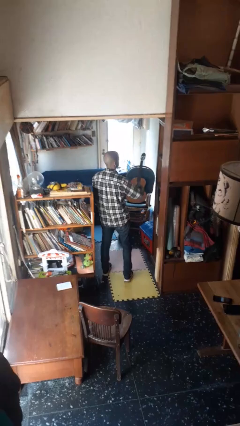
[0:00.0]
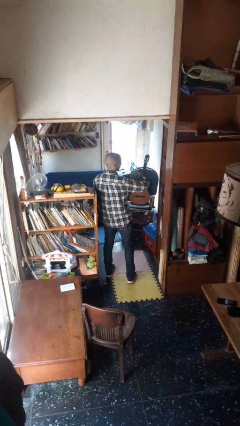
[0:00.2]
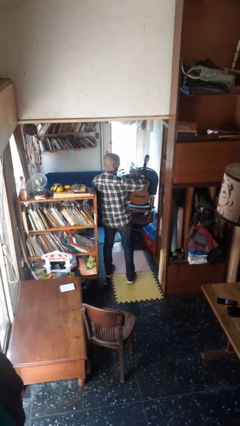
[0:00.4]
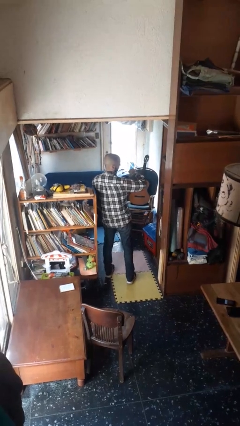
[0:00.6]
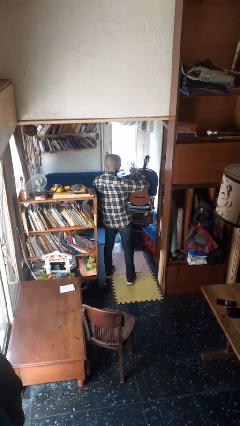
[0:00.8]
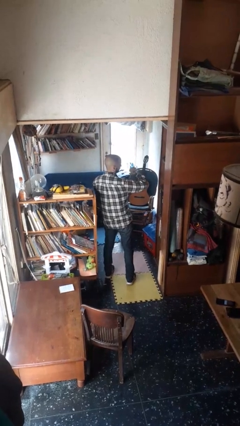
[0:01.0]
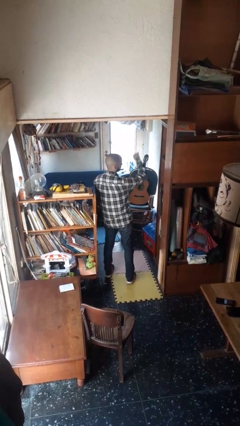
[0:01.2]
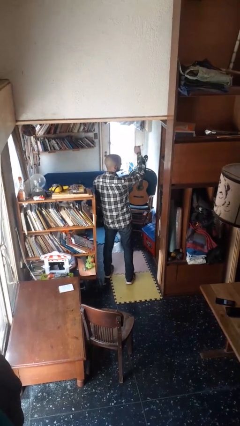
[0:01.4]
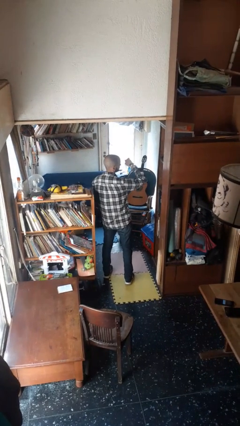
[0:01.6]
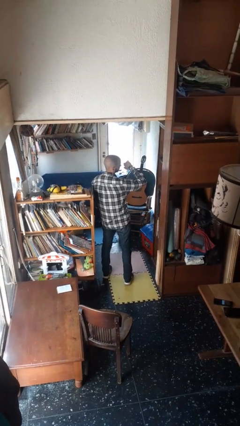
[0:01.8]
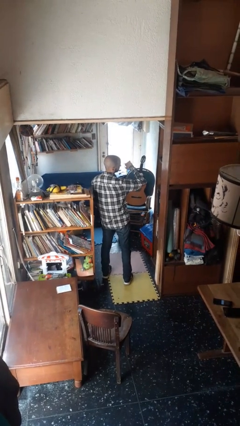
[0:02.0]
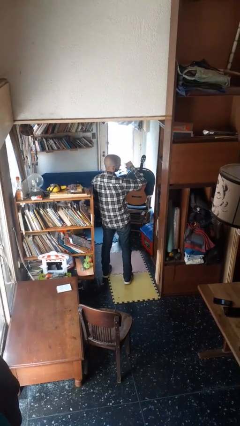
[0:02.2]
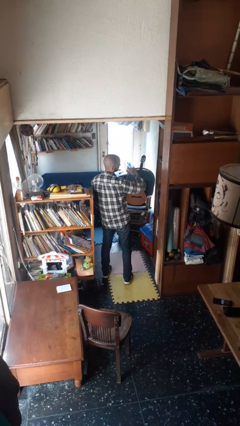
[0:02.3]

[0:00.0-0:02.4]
person looks at wristwatch

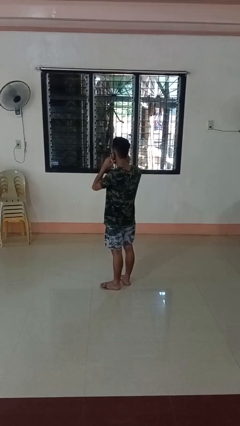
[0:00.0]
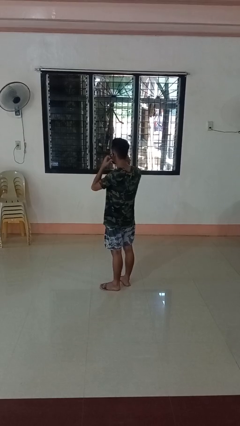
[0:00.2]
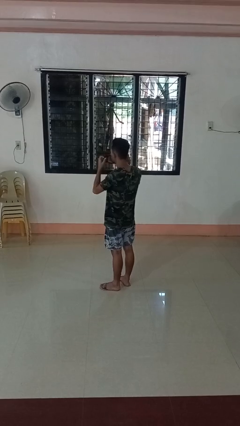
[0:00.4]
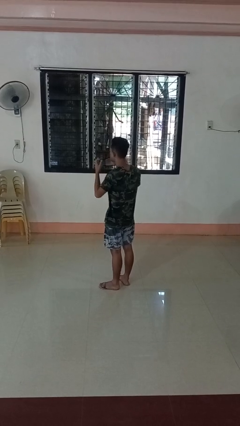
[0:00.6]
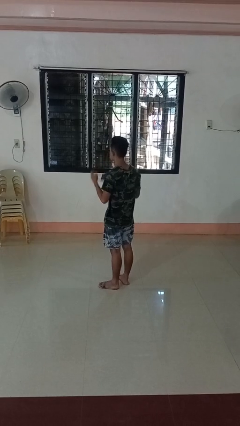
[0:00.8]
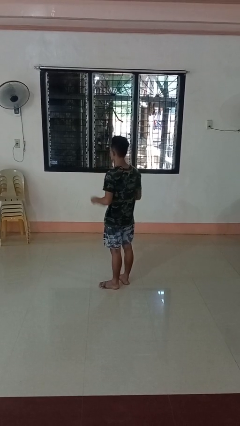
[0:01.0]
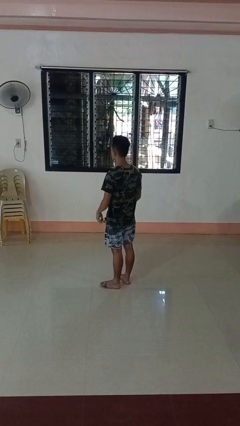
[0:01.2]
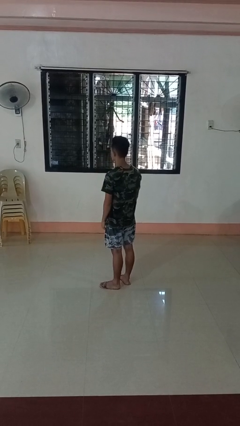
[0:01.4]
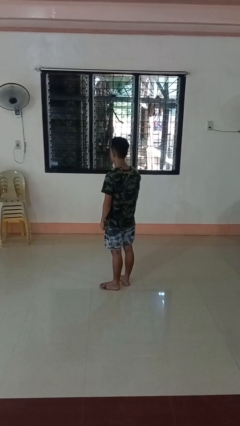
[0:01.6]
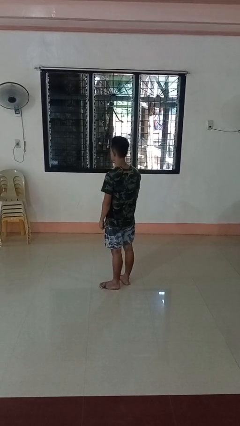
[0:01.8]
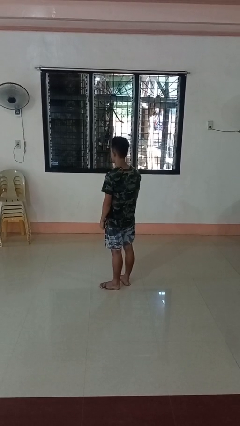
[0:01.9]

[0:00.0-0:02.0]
person takes off facemask

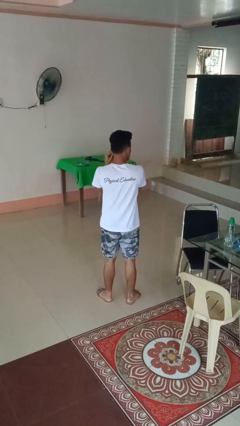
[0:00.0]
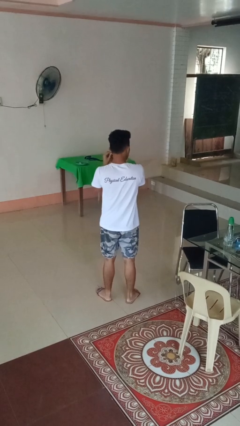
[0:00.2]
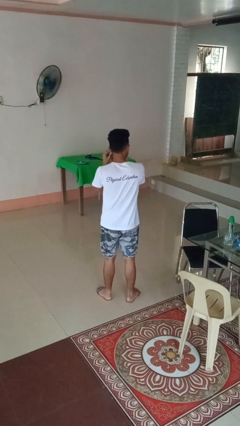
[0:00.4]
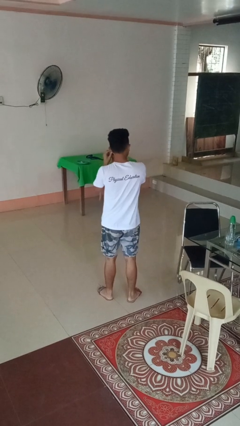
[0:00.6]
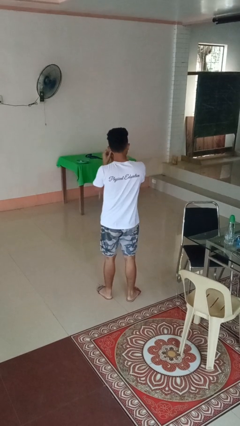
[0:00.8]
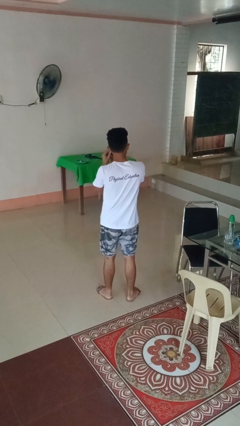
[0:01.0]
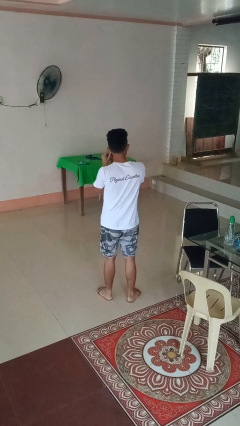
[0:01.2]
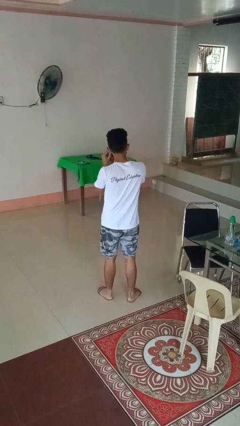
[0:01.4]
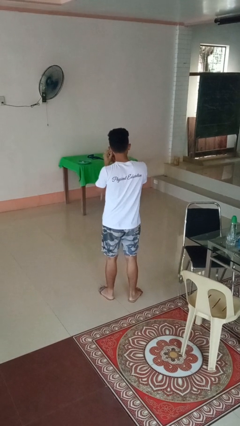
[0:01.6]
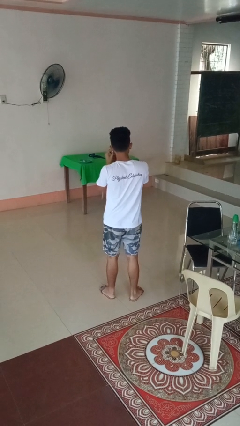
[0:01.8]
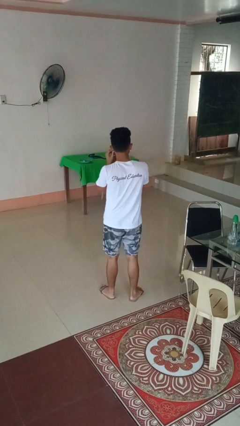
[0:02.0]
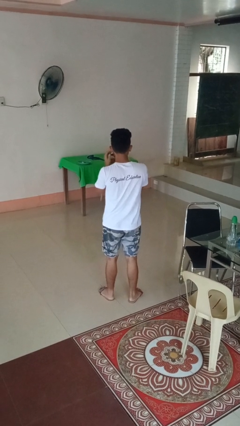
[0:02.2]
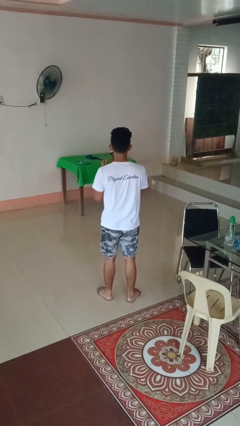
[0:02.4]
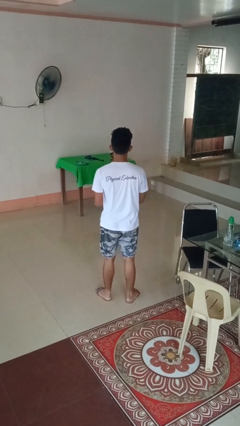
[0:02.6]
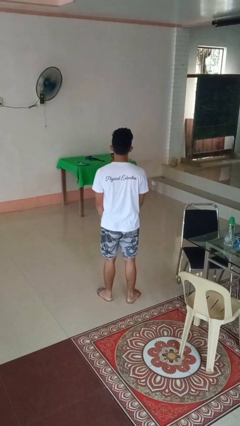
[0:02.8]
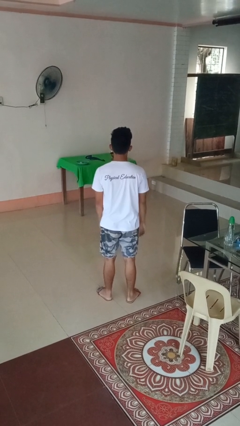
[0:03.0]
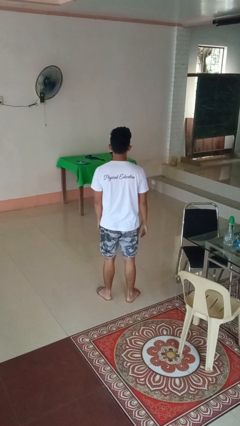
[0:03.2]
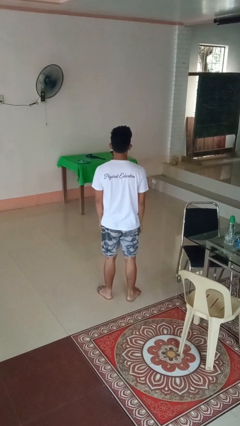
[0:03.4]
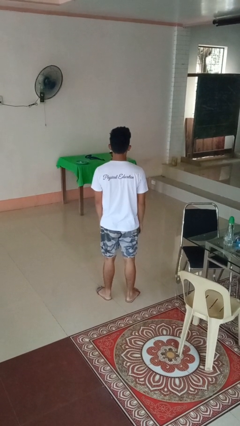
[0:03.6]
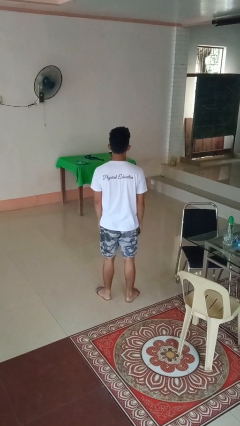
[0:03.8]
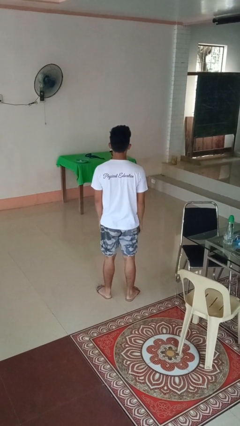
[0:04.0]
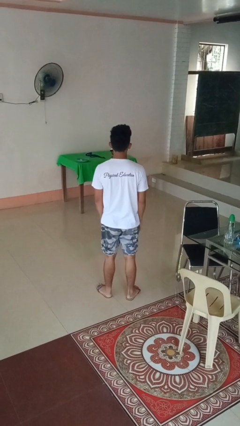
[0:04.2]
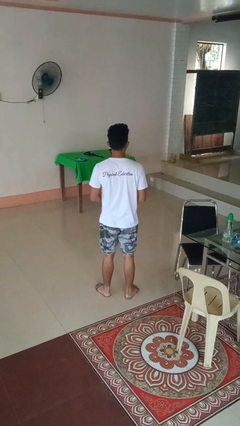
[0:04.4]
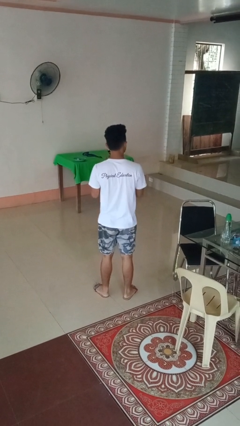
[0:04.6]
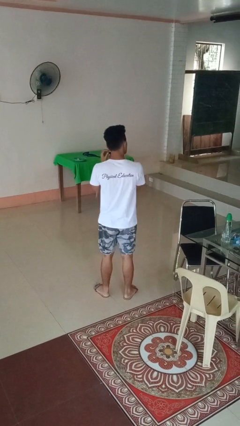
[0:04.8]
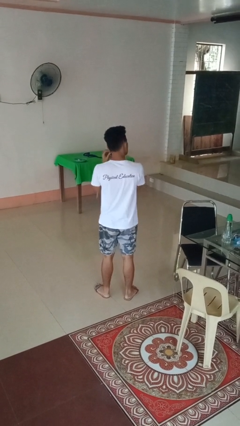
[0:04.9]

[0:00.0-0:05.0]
person puts on earrings

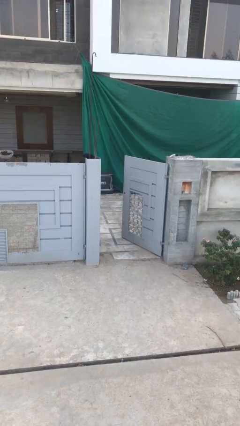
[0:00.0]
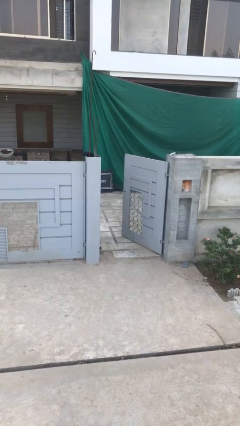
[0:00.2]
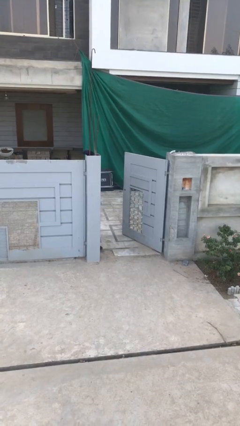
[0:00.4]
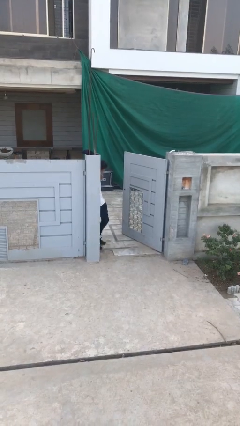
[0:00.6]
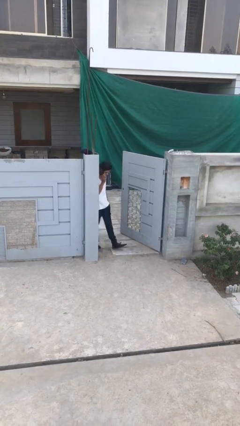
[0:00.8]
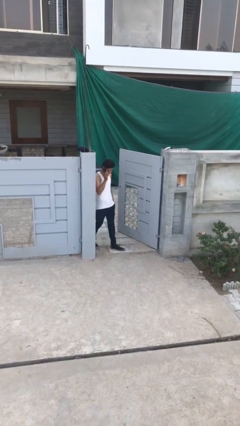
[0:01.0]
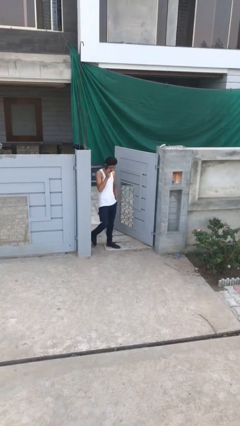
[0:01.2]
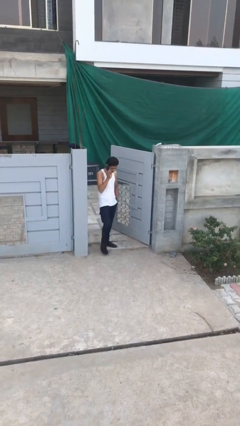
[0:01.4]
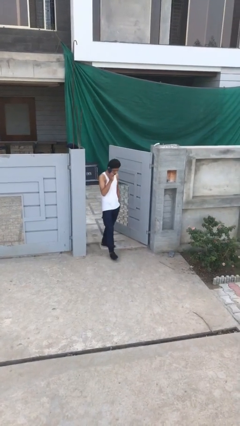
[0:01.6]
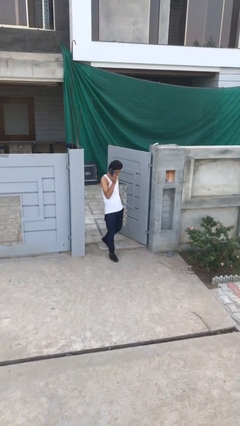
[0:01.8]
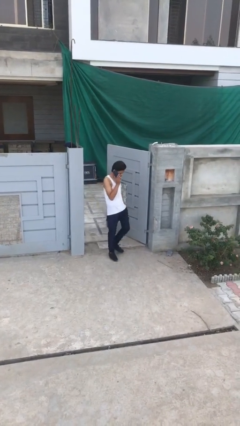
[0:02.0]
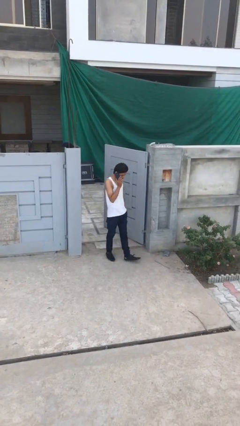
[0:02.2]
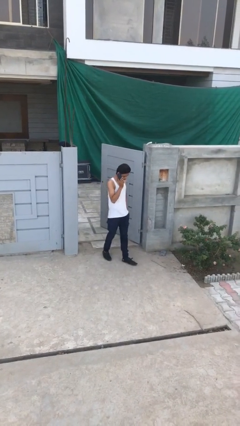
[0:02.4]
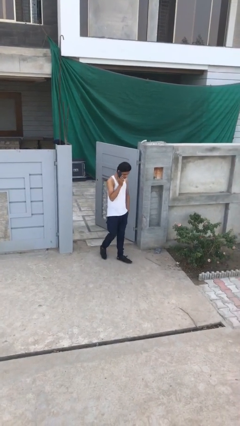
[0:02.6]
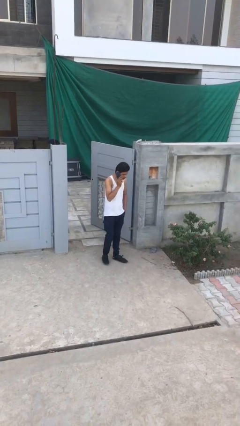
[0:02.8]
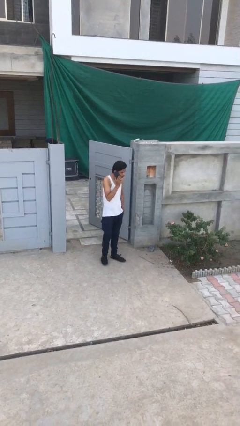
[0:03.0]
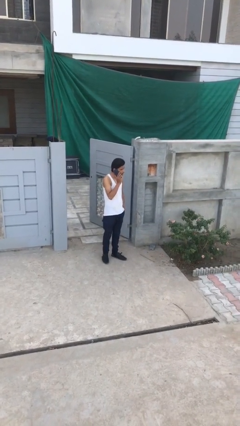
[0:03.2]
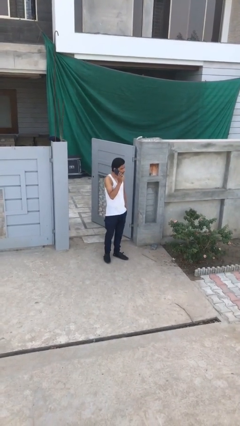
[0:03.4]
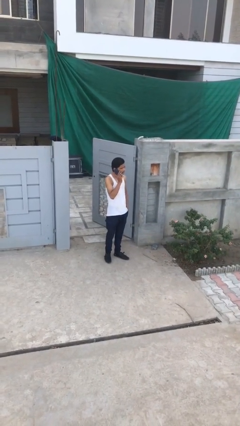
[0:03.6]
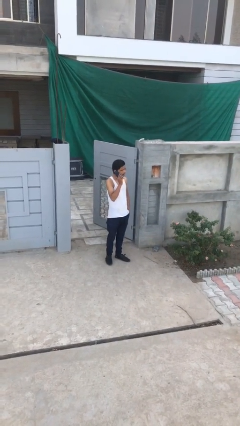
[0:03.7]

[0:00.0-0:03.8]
person enters scene through structure

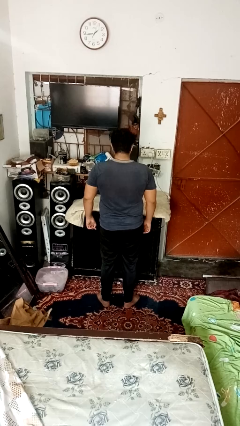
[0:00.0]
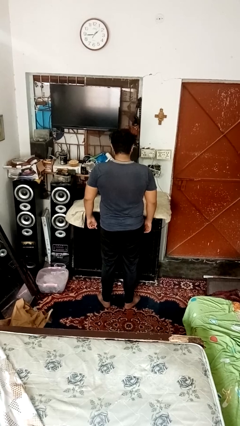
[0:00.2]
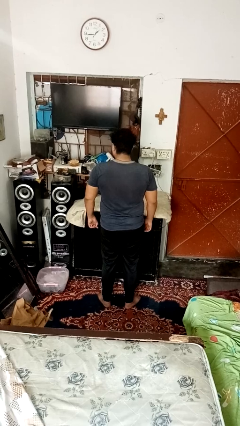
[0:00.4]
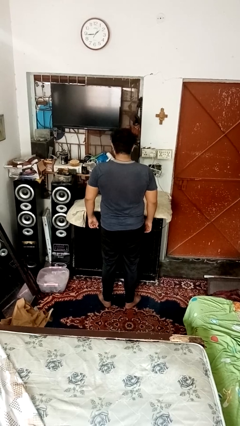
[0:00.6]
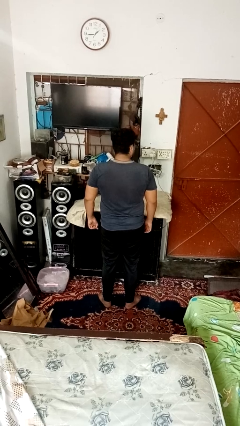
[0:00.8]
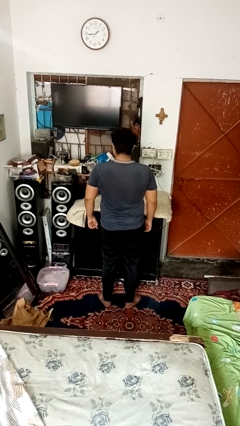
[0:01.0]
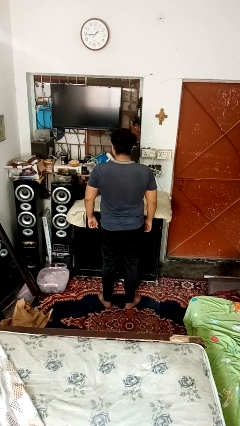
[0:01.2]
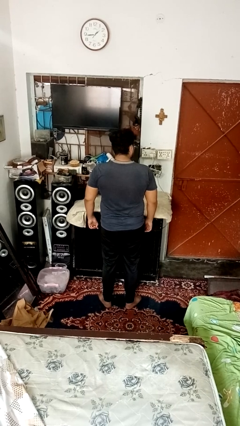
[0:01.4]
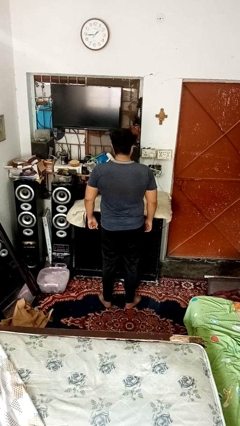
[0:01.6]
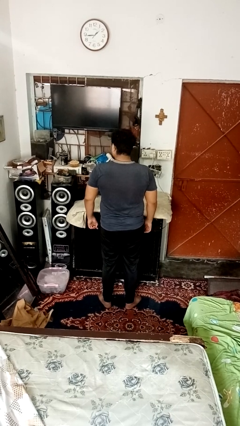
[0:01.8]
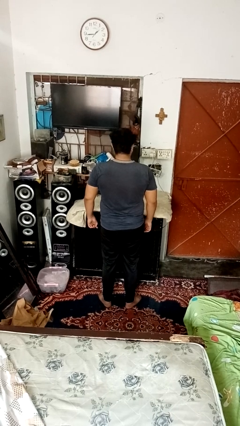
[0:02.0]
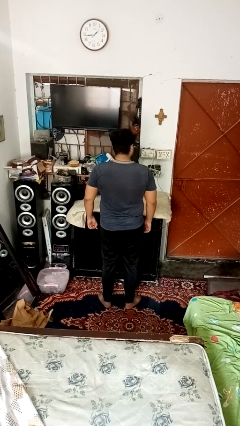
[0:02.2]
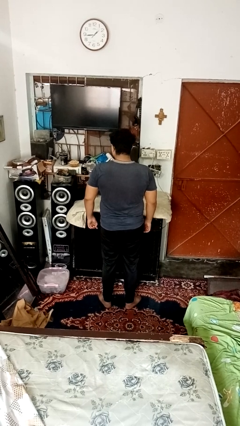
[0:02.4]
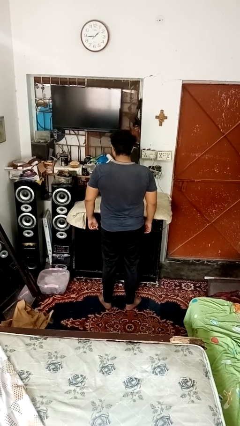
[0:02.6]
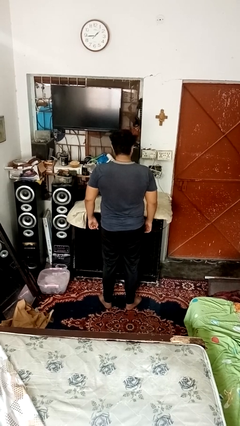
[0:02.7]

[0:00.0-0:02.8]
person shakes head

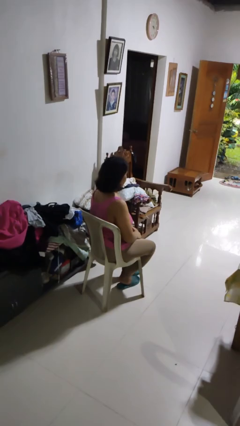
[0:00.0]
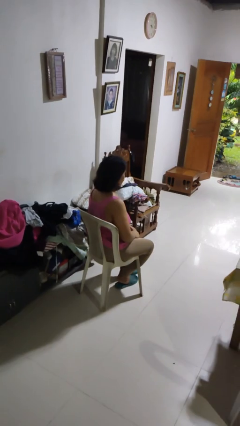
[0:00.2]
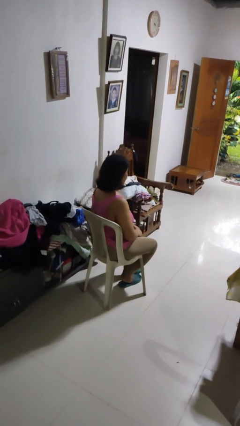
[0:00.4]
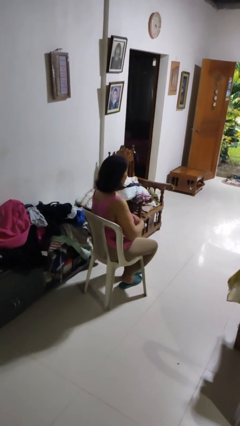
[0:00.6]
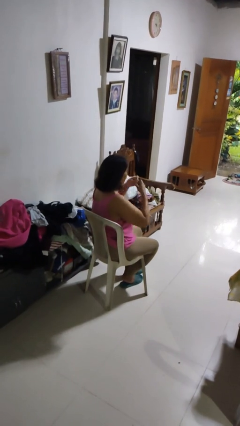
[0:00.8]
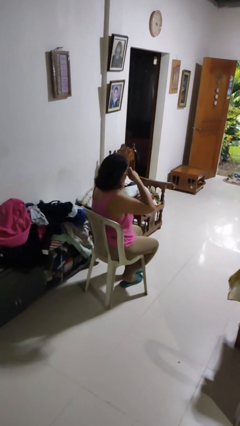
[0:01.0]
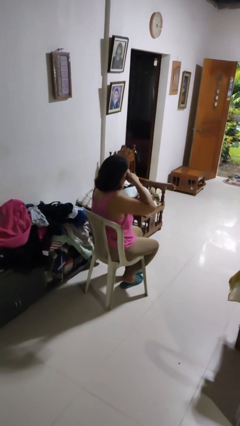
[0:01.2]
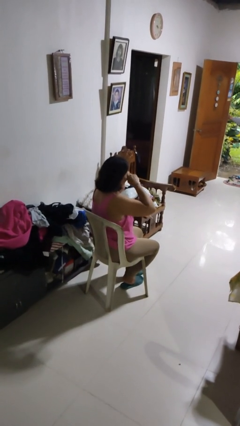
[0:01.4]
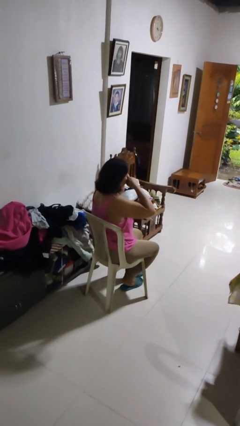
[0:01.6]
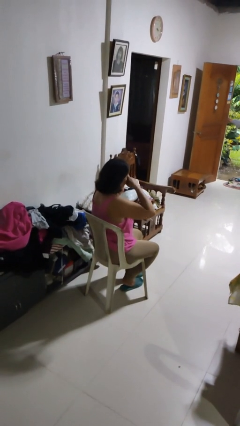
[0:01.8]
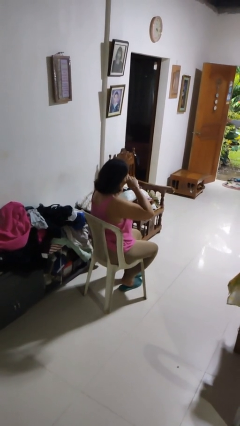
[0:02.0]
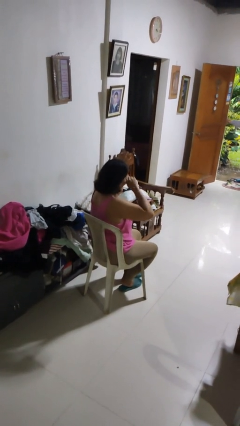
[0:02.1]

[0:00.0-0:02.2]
person rubs eyes
